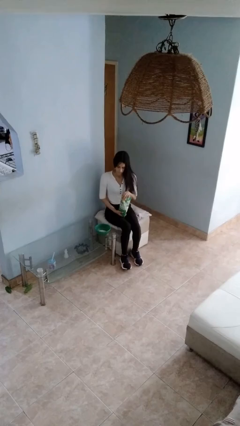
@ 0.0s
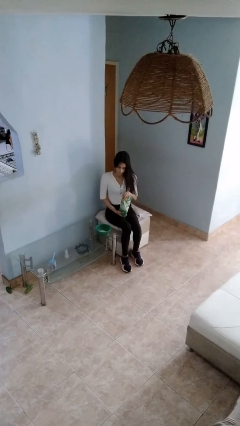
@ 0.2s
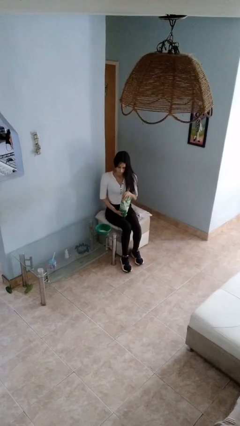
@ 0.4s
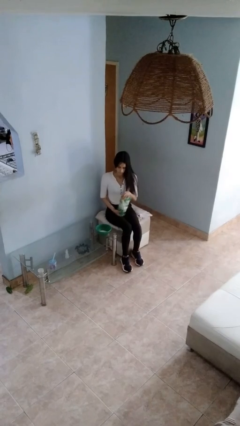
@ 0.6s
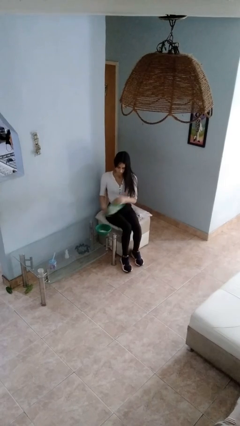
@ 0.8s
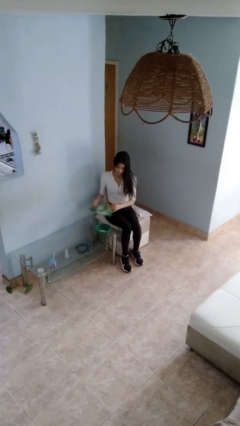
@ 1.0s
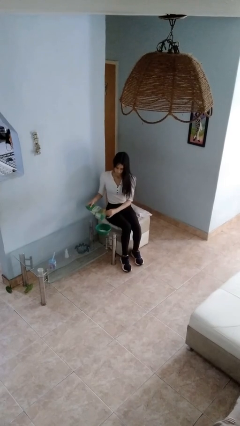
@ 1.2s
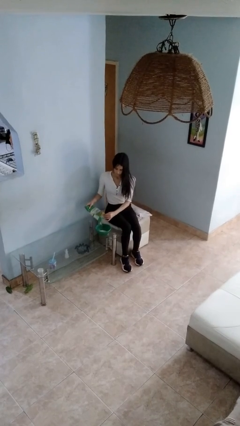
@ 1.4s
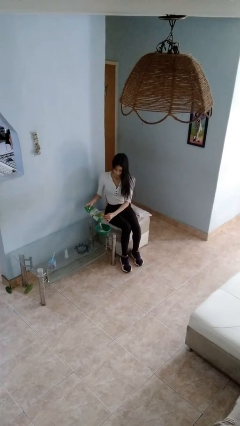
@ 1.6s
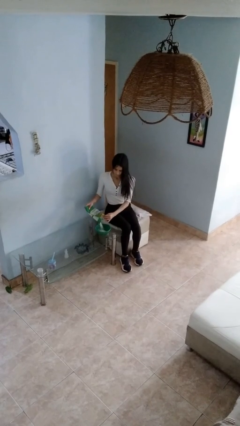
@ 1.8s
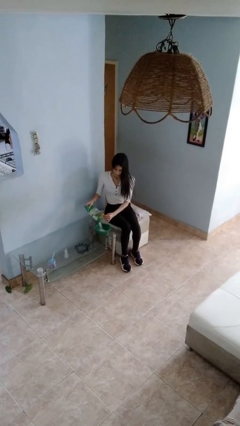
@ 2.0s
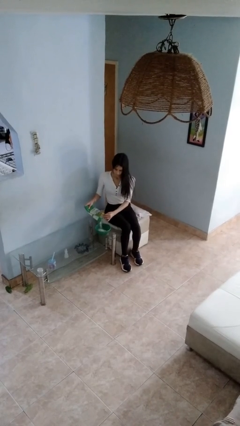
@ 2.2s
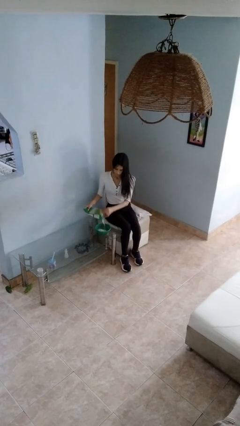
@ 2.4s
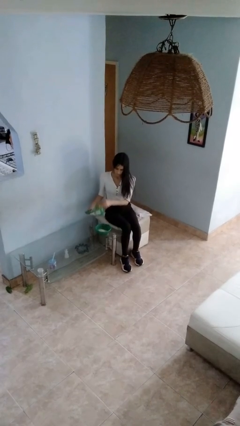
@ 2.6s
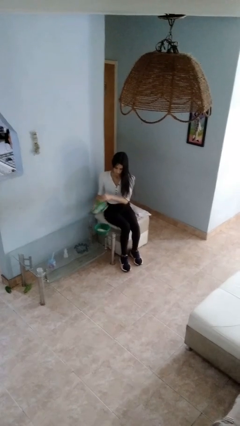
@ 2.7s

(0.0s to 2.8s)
person pours into bowl

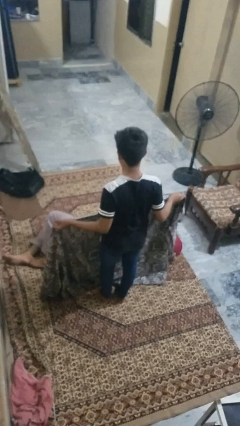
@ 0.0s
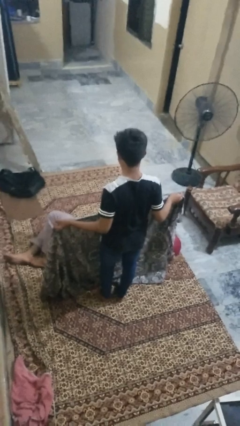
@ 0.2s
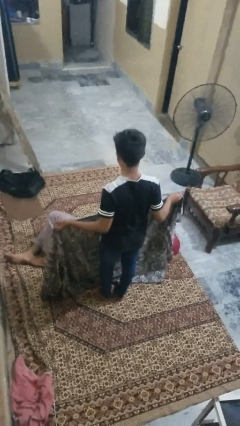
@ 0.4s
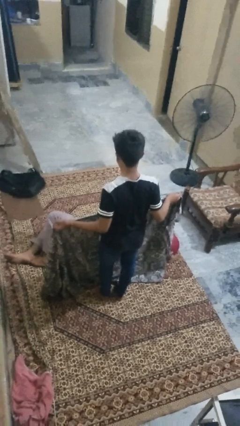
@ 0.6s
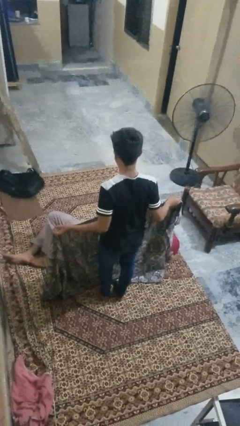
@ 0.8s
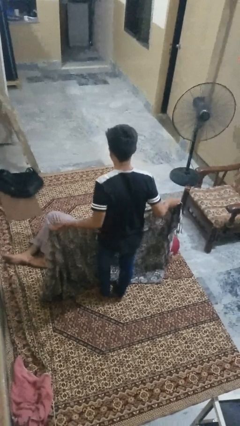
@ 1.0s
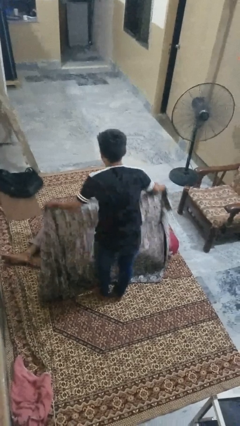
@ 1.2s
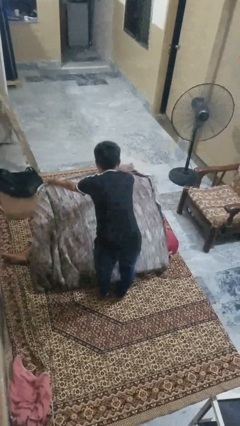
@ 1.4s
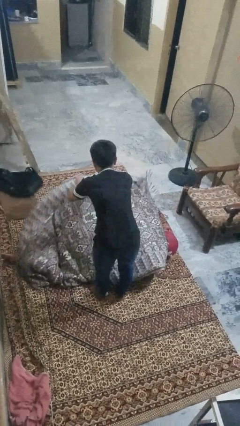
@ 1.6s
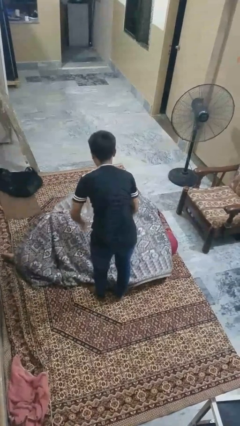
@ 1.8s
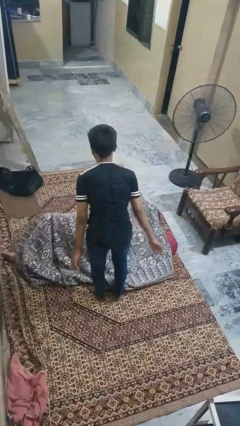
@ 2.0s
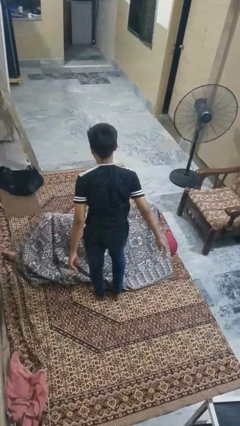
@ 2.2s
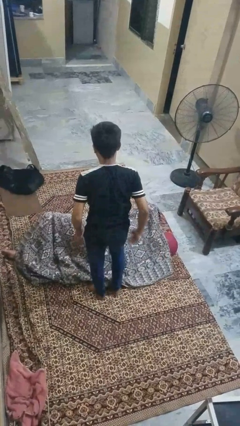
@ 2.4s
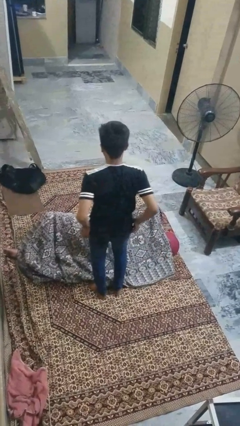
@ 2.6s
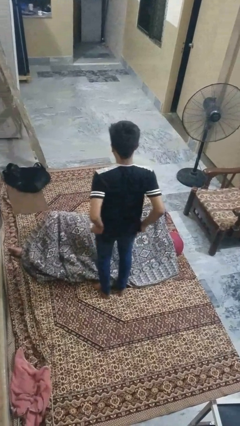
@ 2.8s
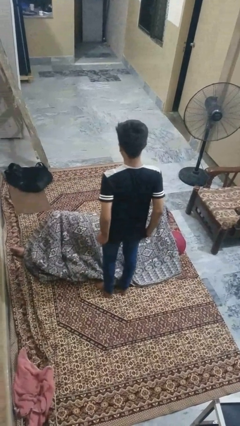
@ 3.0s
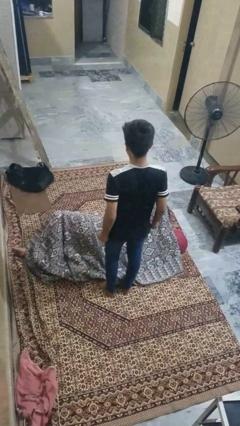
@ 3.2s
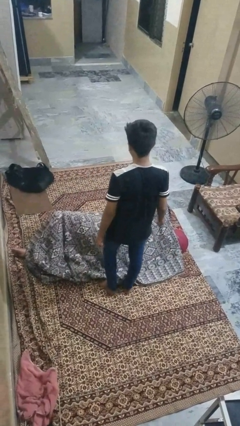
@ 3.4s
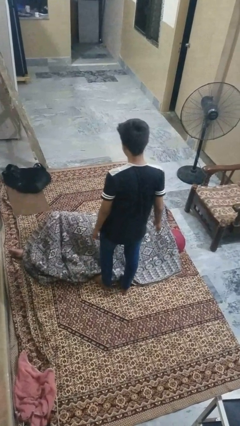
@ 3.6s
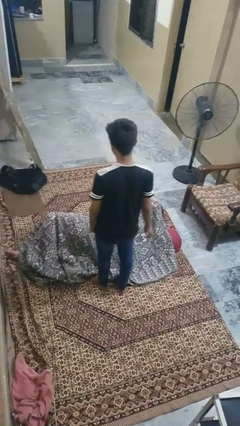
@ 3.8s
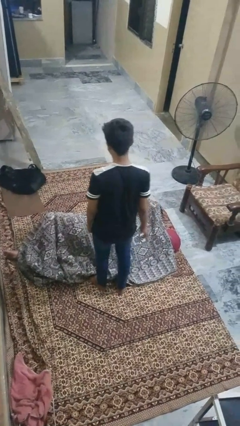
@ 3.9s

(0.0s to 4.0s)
person covers friend with blanket

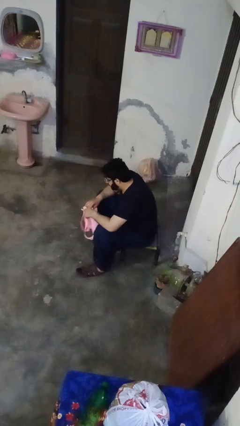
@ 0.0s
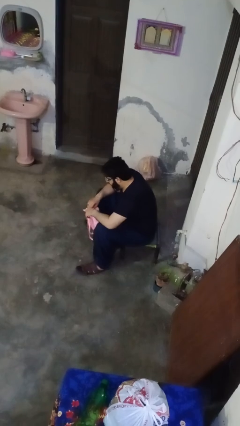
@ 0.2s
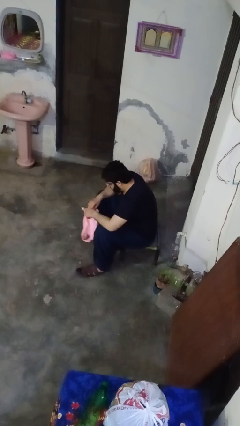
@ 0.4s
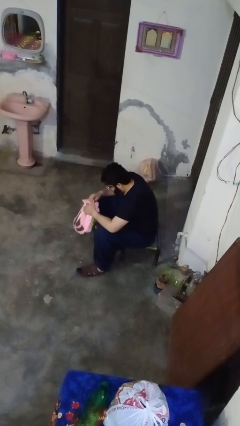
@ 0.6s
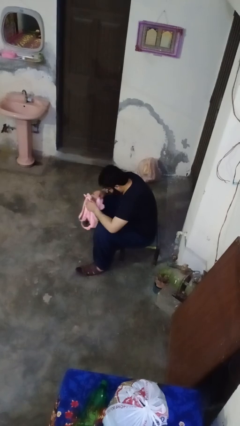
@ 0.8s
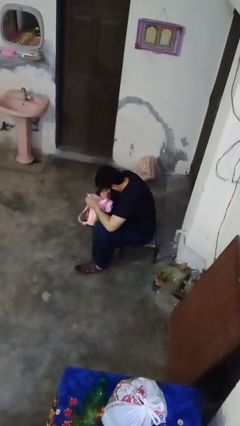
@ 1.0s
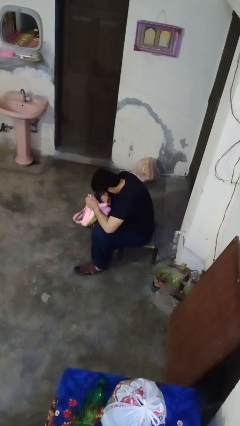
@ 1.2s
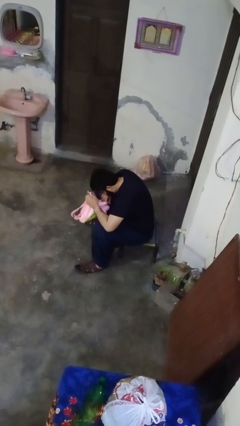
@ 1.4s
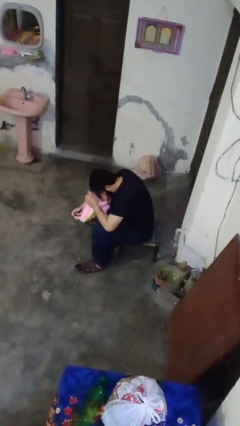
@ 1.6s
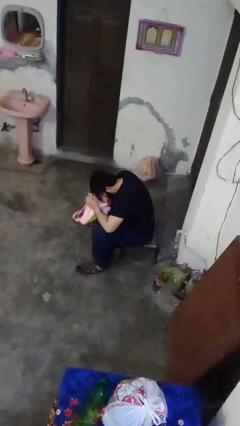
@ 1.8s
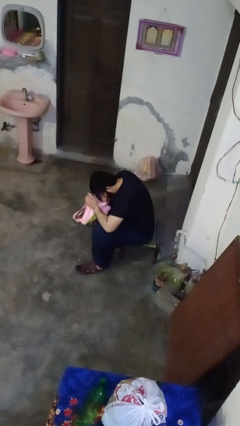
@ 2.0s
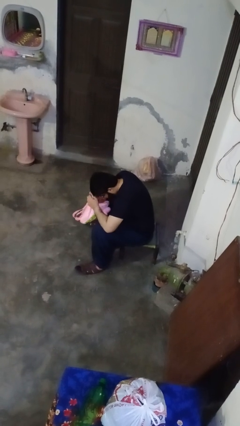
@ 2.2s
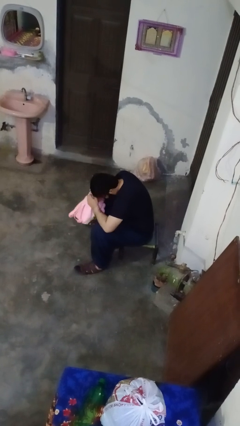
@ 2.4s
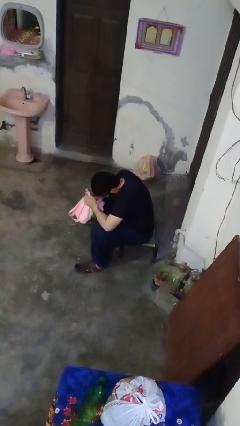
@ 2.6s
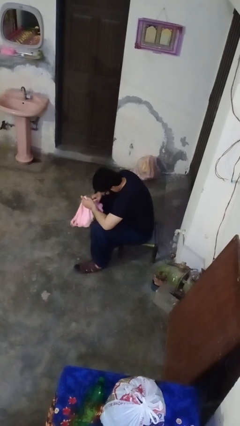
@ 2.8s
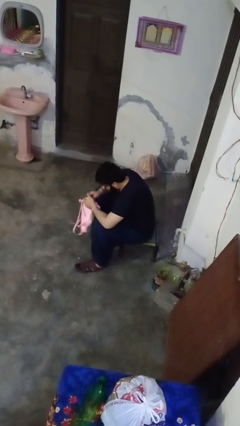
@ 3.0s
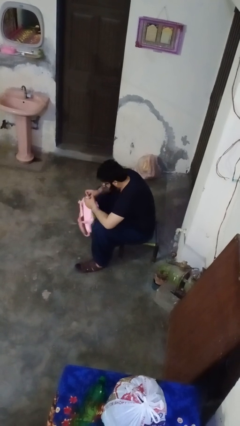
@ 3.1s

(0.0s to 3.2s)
person searches in bag

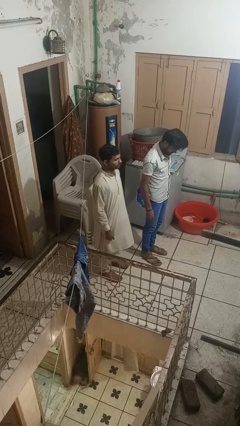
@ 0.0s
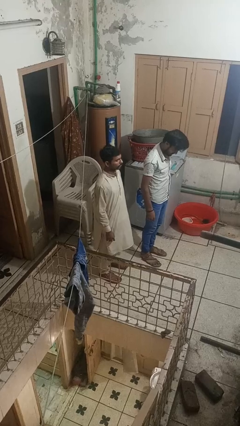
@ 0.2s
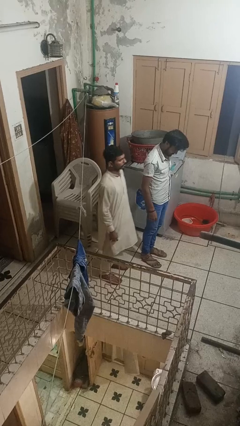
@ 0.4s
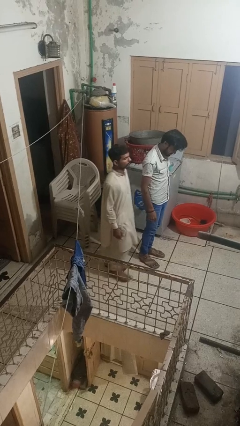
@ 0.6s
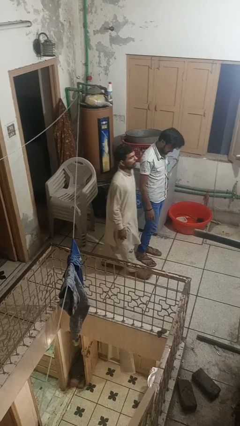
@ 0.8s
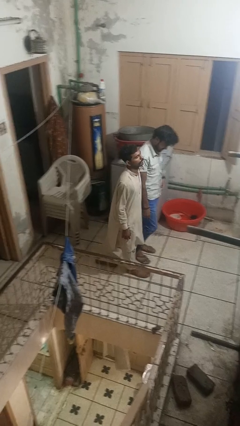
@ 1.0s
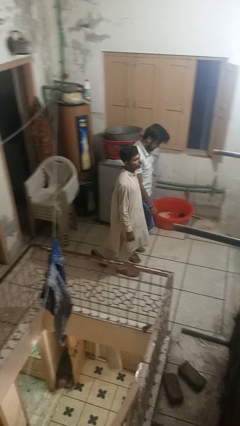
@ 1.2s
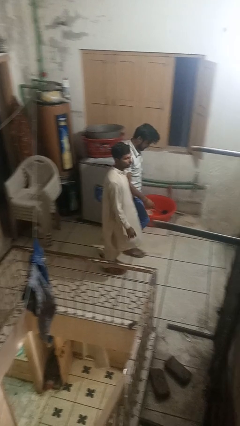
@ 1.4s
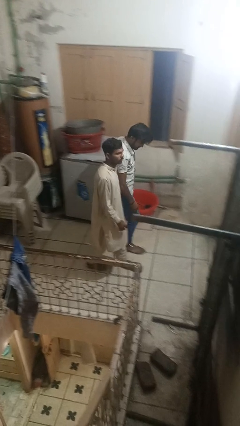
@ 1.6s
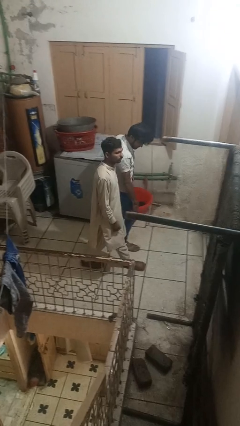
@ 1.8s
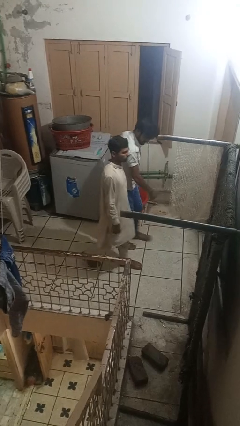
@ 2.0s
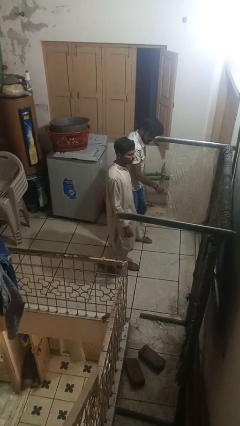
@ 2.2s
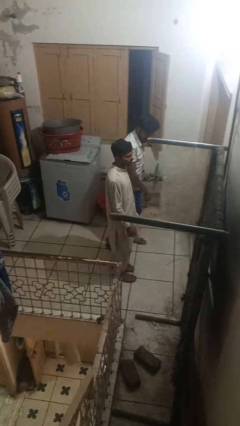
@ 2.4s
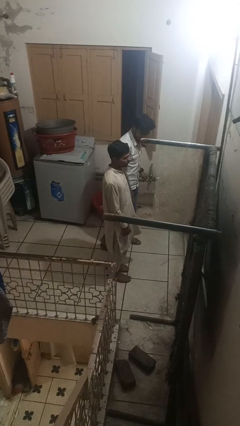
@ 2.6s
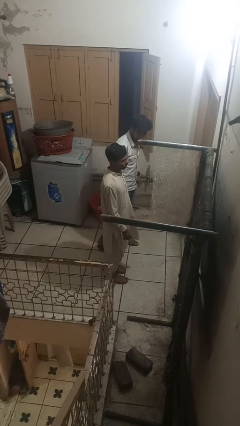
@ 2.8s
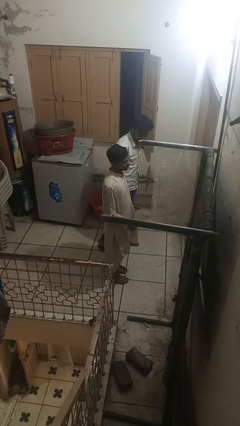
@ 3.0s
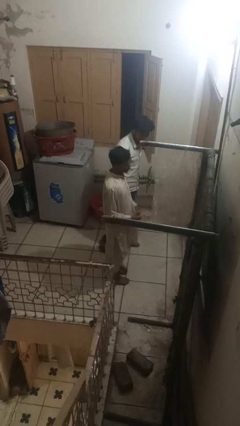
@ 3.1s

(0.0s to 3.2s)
person bumps into person

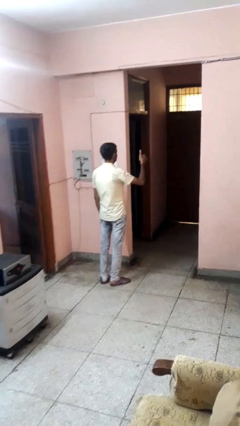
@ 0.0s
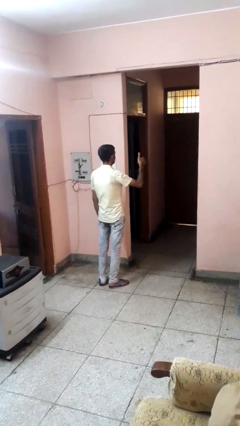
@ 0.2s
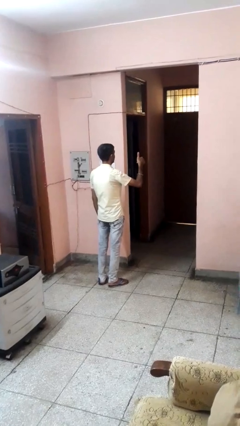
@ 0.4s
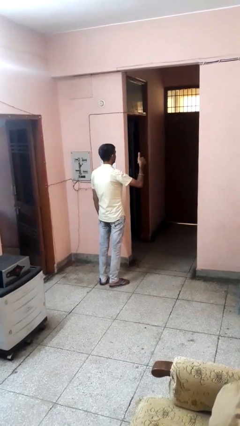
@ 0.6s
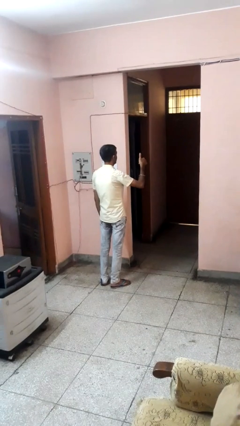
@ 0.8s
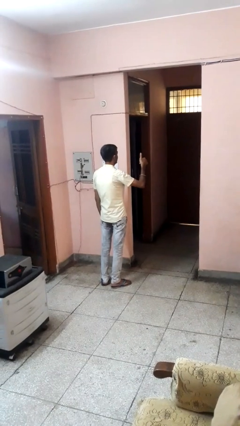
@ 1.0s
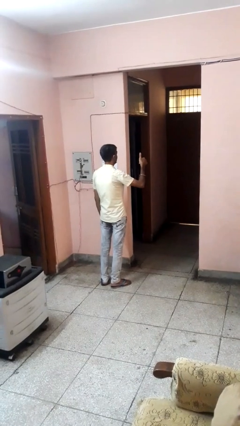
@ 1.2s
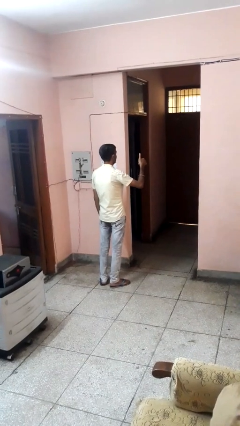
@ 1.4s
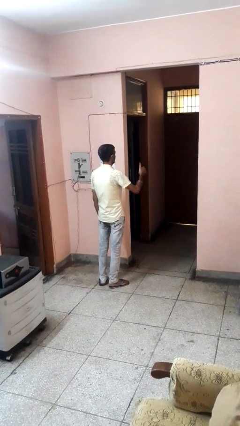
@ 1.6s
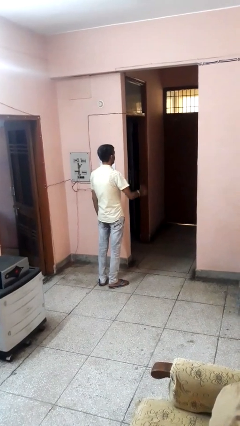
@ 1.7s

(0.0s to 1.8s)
person gestures thumbs up

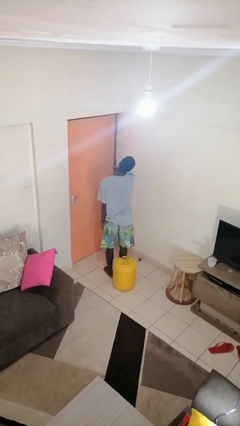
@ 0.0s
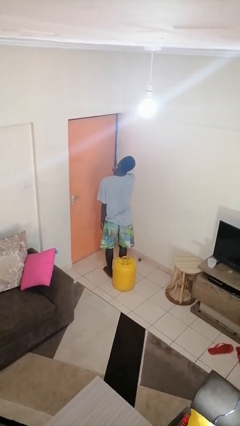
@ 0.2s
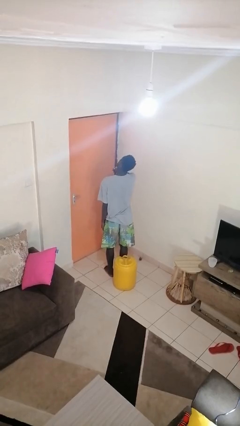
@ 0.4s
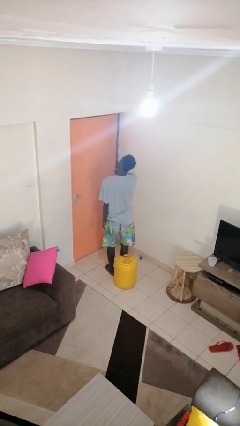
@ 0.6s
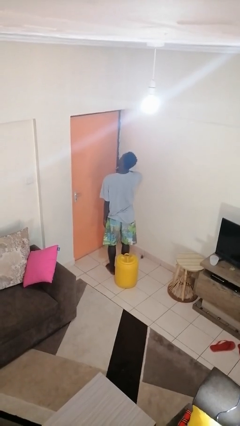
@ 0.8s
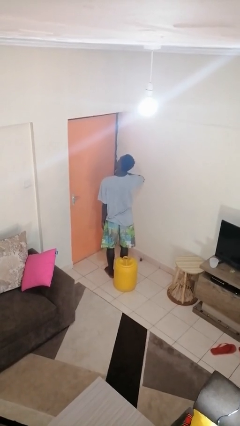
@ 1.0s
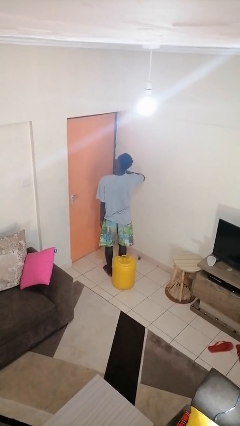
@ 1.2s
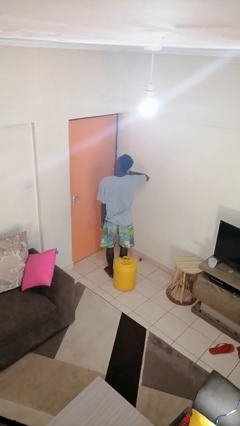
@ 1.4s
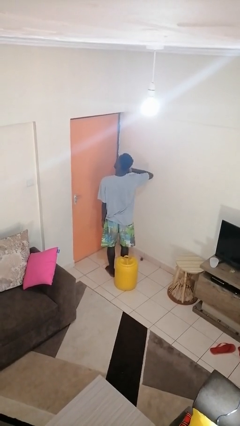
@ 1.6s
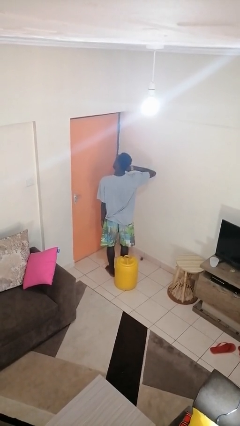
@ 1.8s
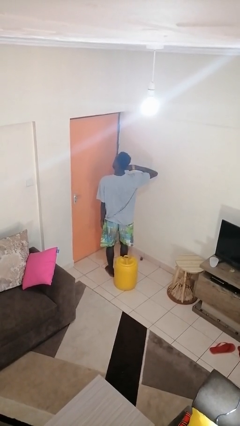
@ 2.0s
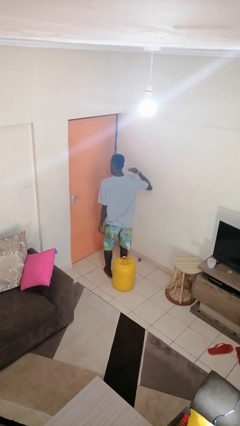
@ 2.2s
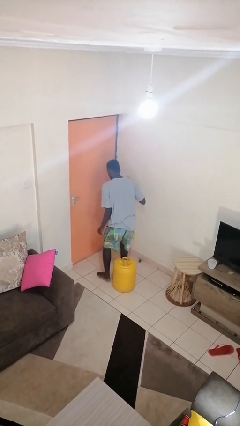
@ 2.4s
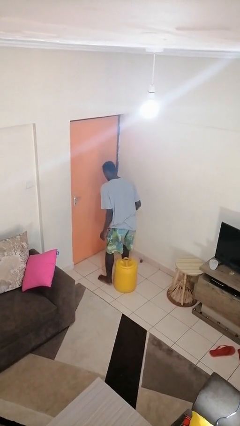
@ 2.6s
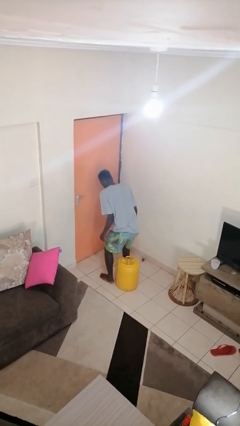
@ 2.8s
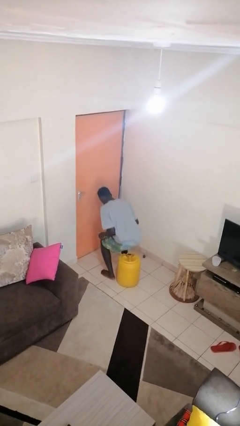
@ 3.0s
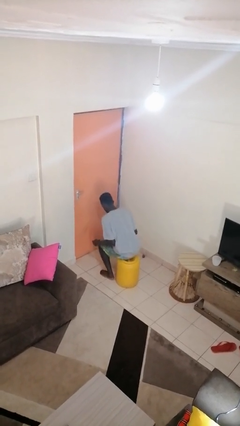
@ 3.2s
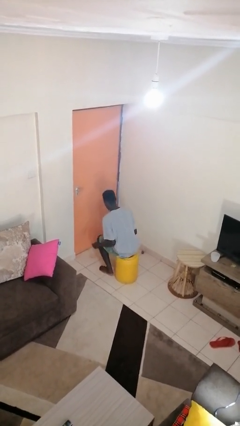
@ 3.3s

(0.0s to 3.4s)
person gestures cut
